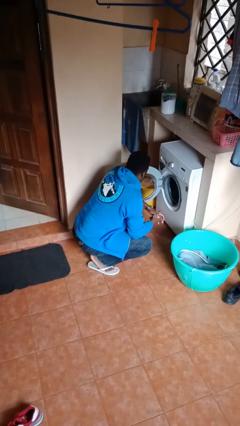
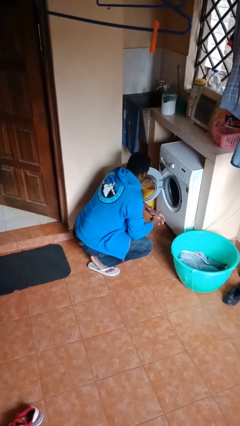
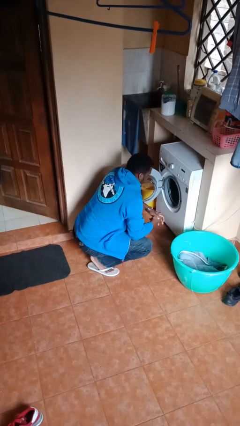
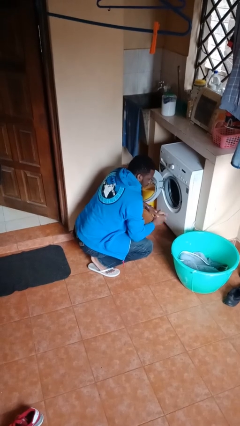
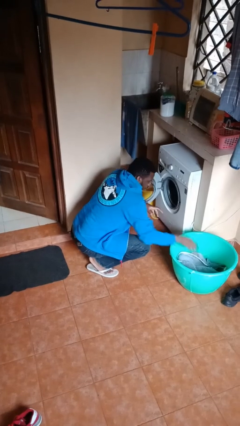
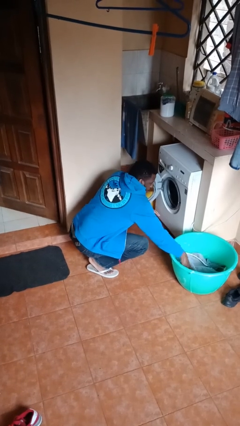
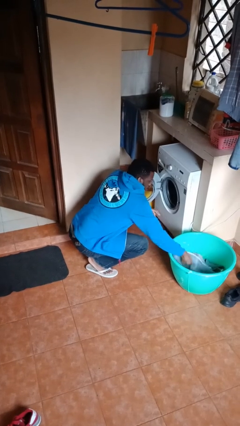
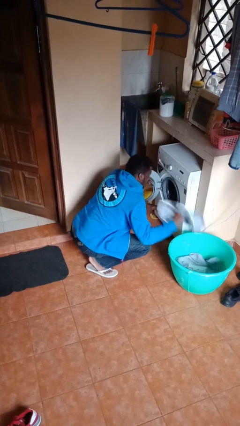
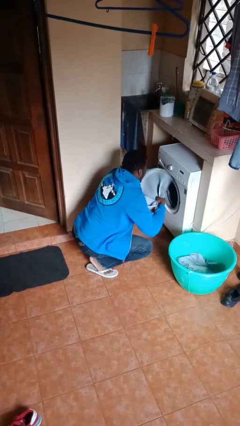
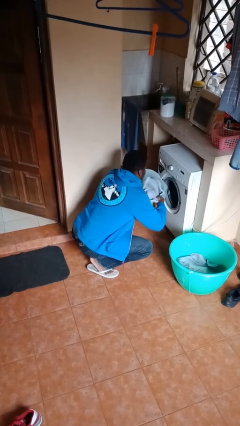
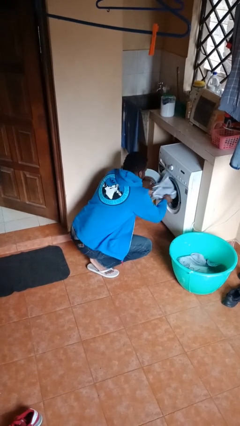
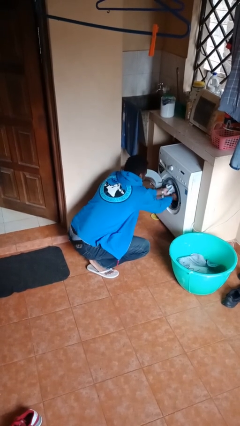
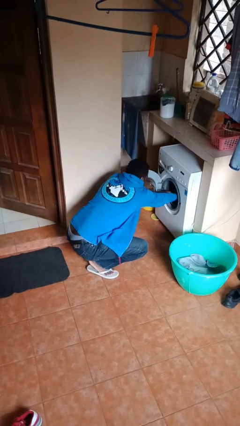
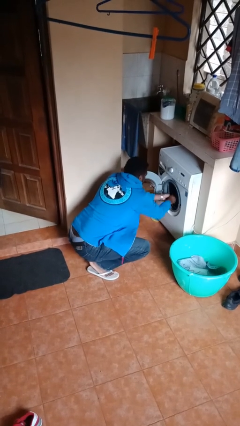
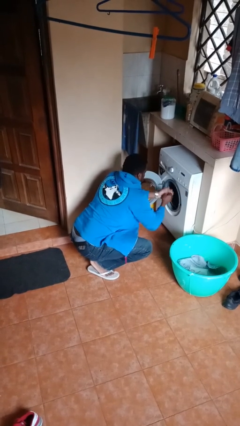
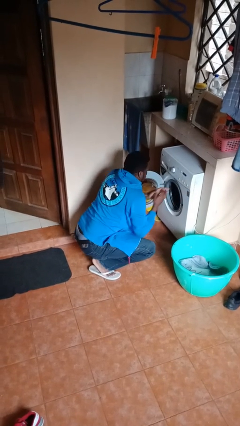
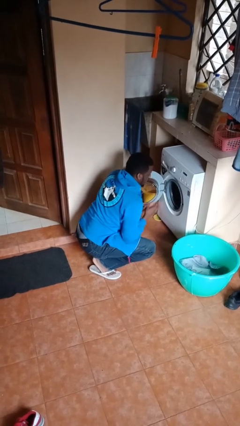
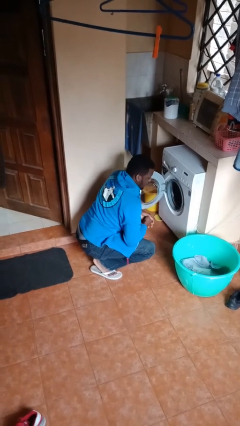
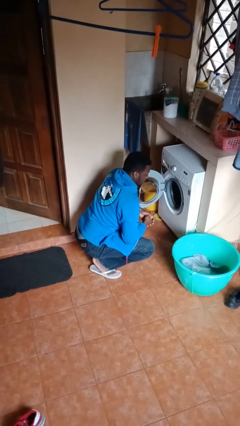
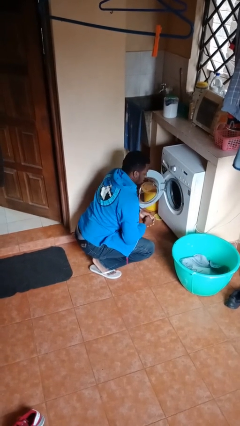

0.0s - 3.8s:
person loads clotheswasher

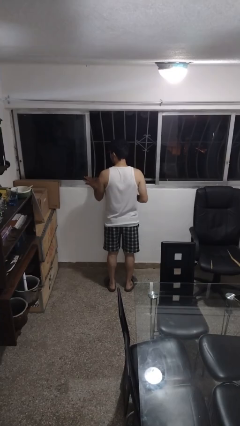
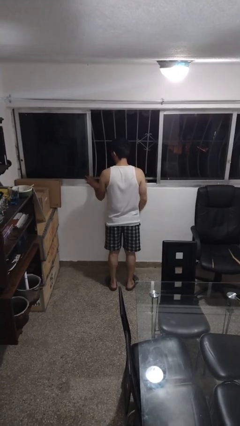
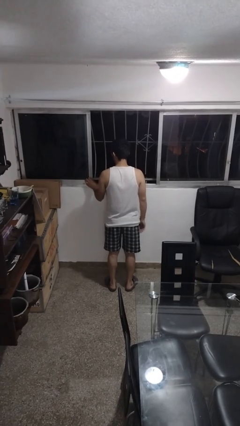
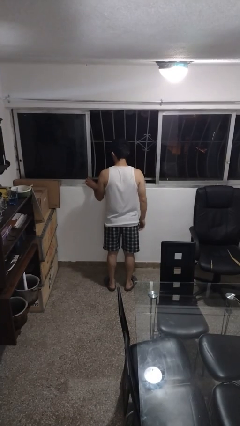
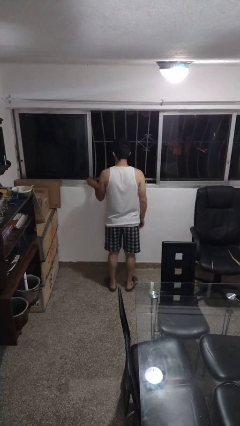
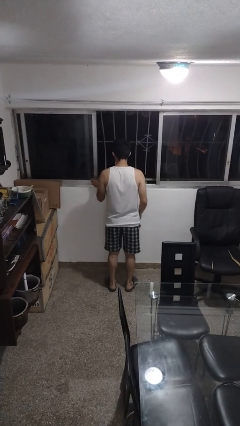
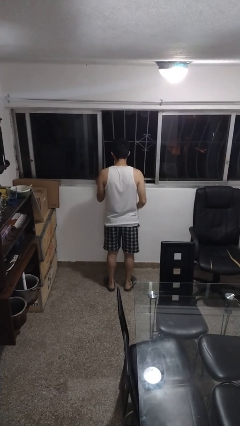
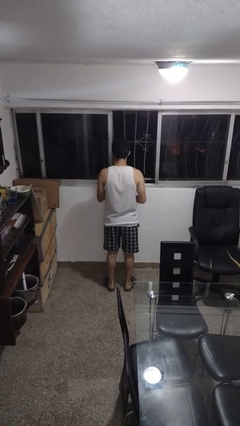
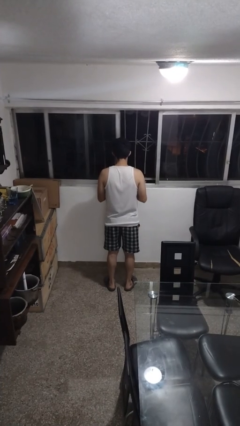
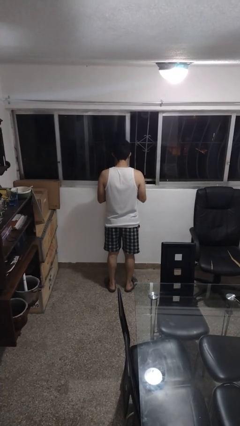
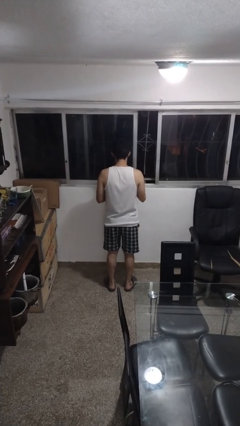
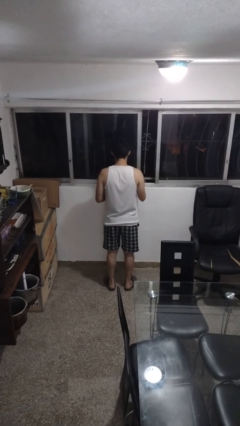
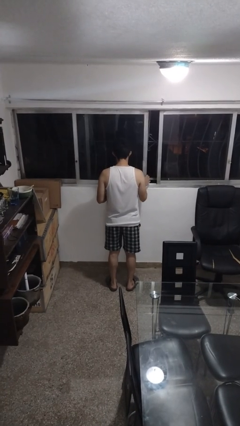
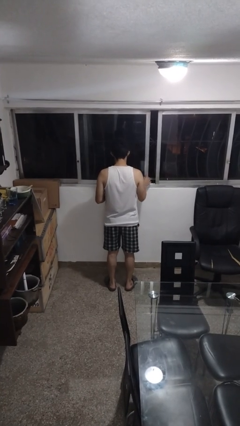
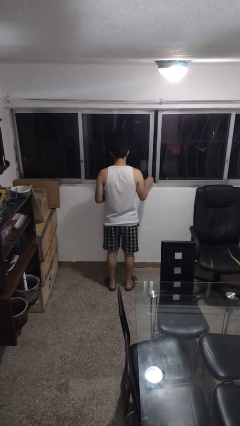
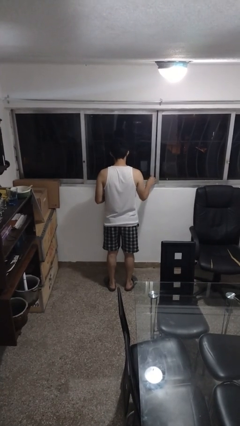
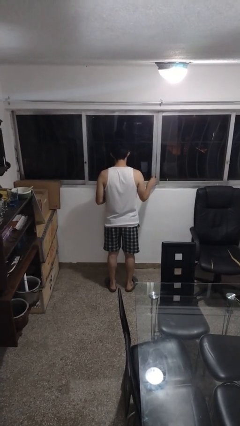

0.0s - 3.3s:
person closes home window

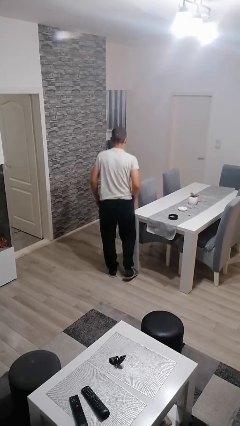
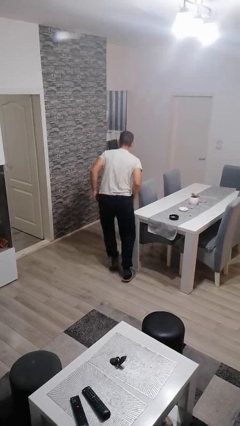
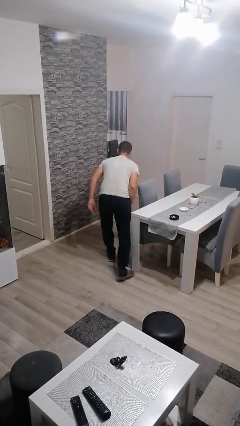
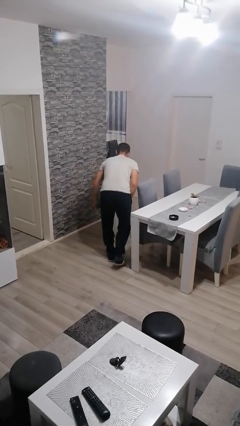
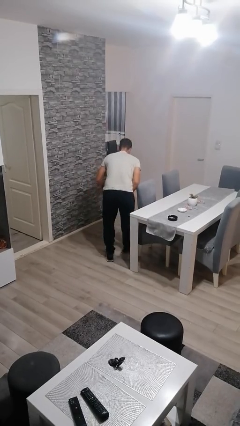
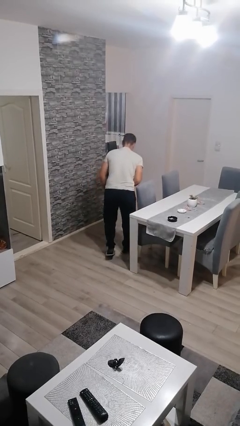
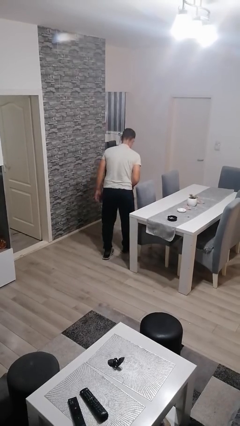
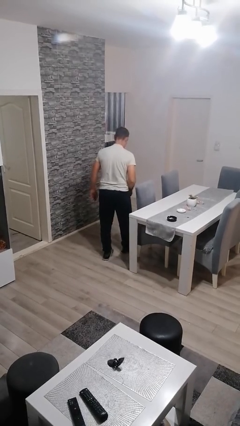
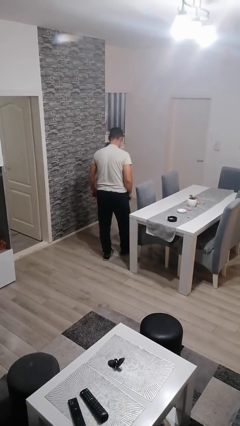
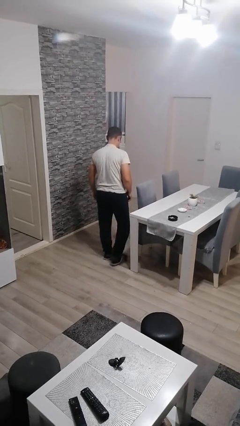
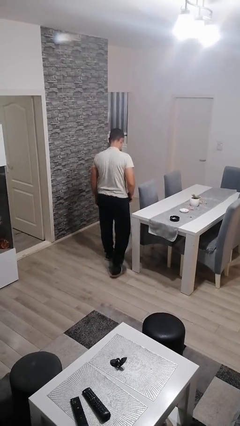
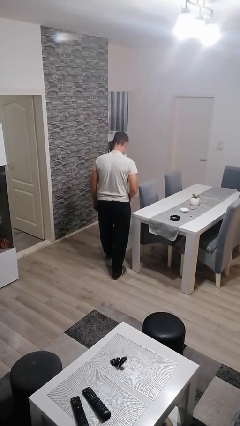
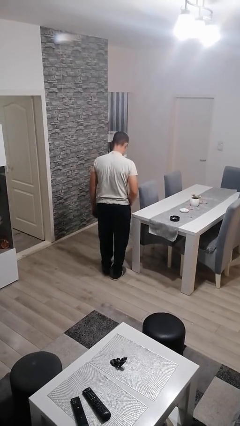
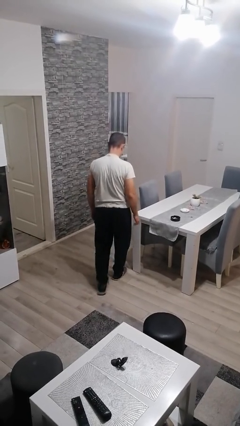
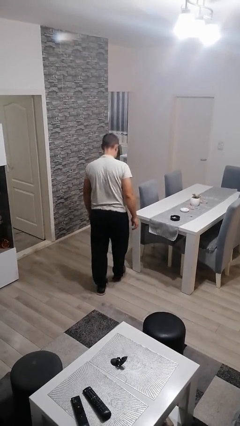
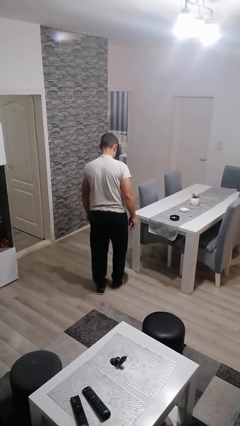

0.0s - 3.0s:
person bumps into table

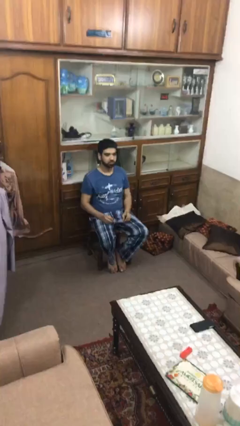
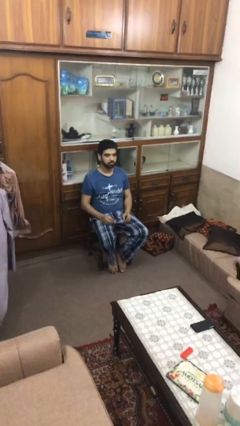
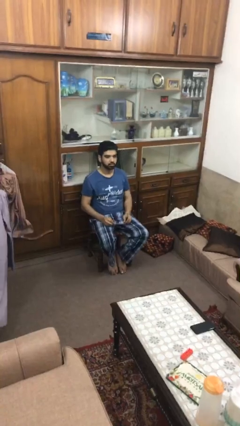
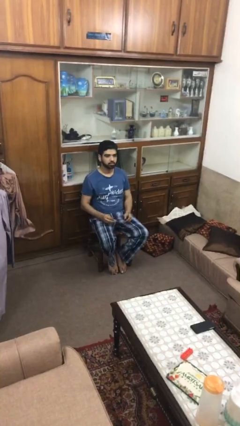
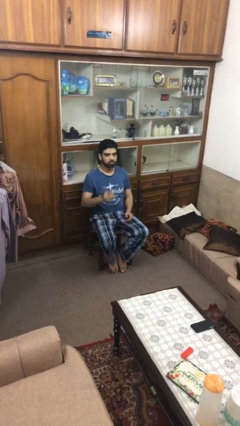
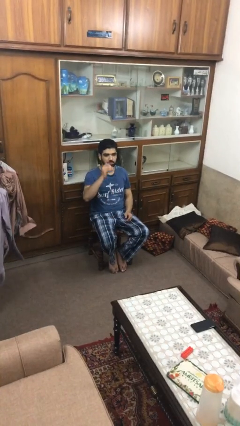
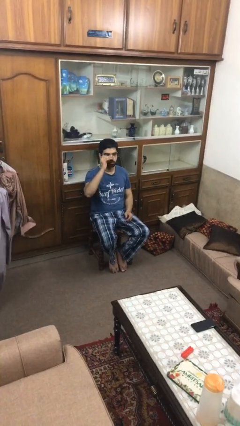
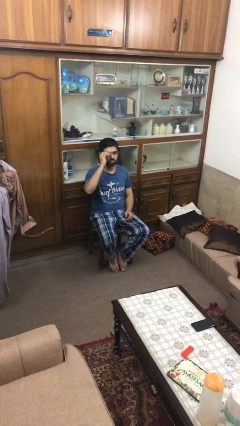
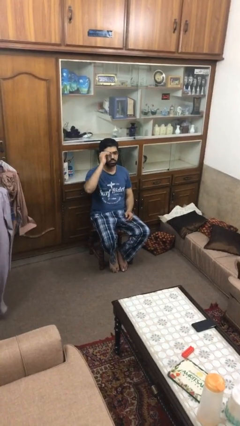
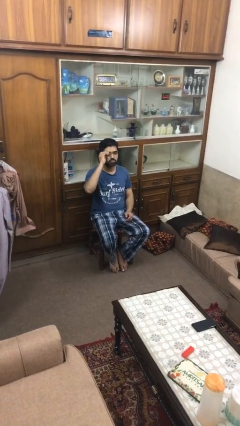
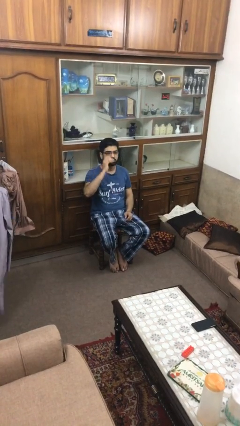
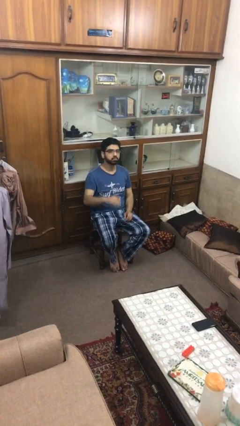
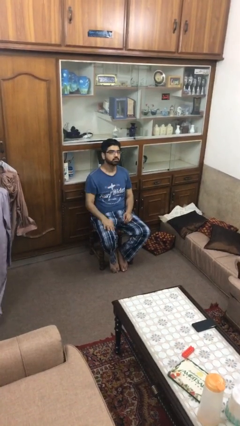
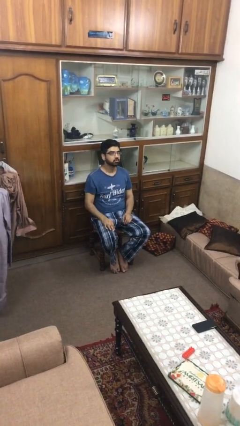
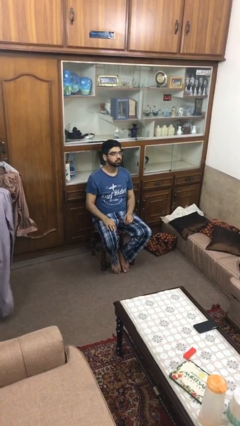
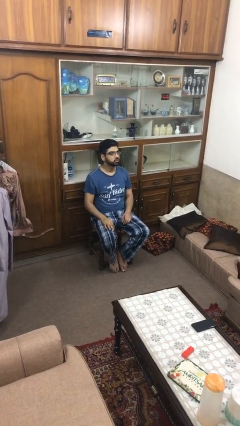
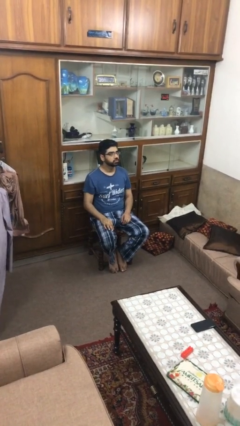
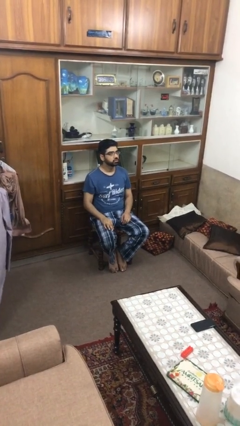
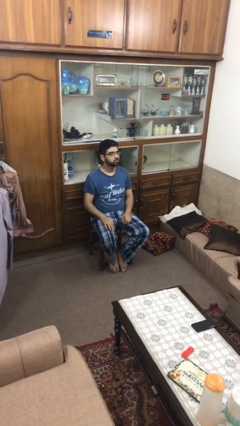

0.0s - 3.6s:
person puts on glasses

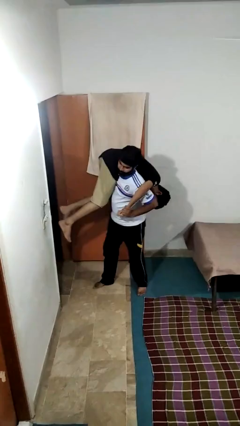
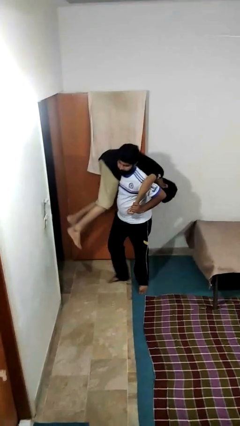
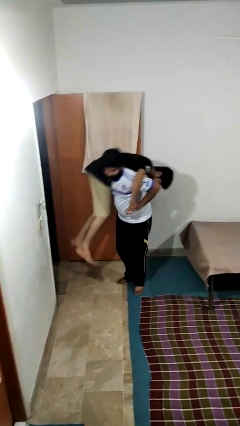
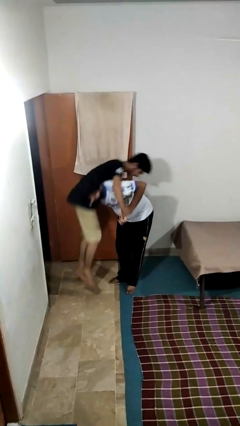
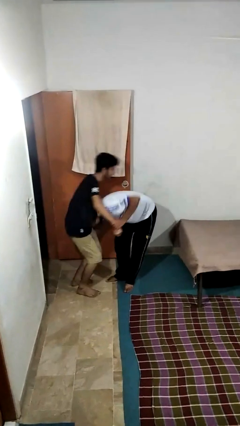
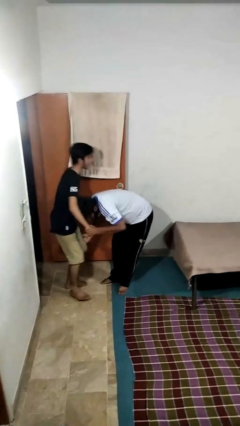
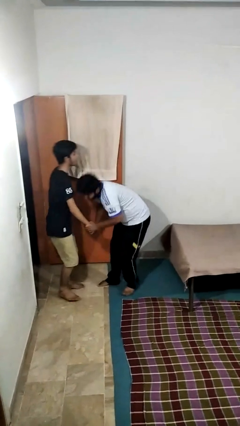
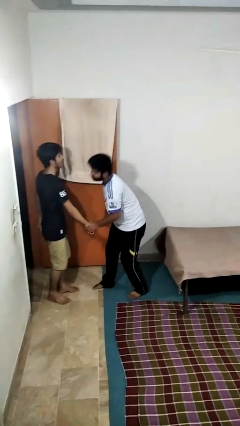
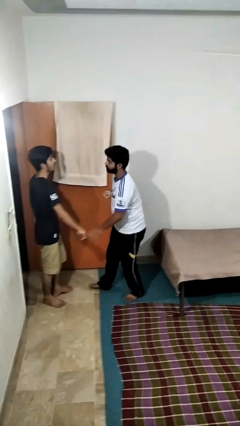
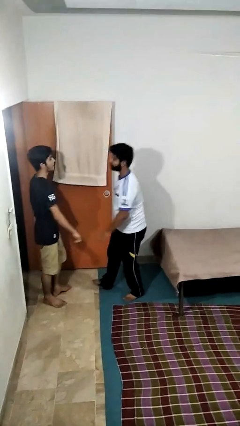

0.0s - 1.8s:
person puts down person

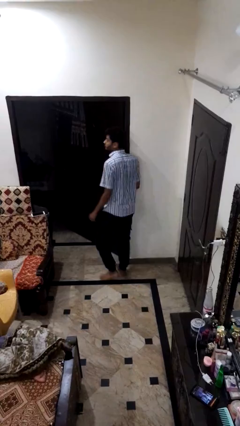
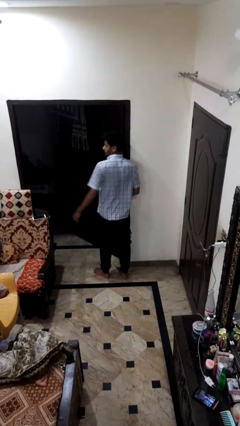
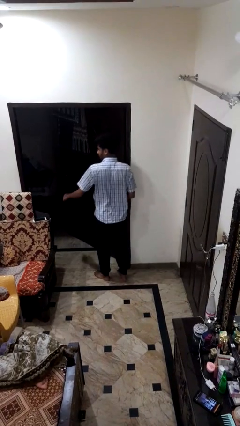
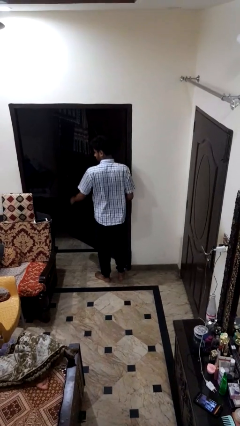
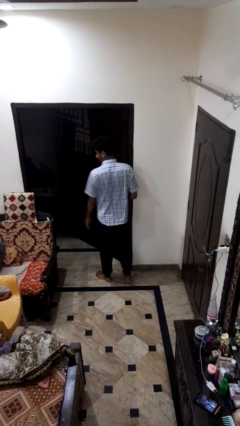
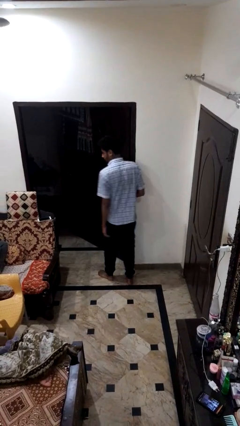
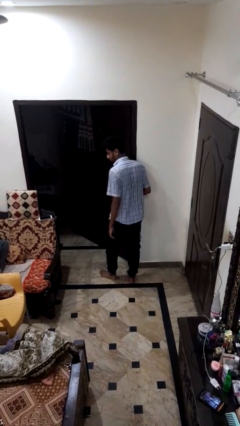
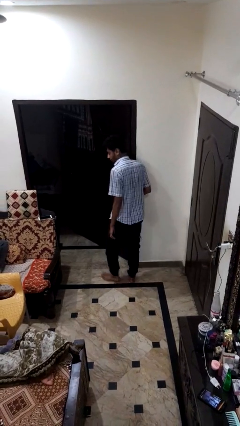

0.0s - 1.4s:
person bumps into wall

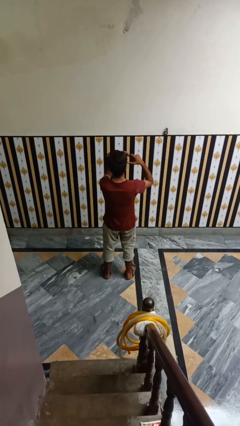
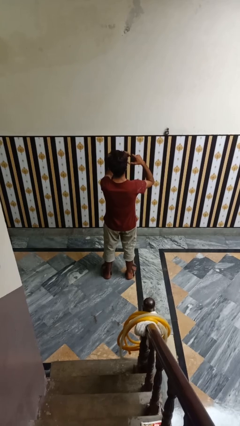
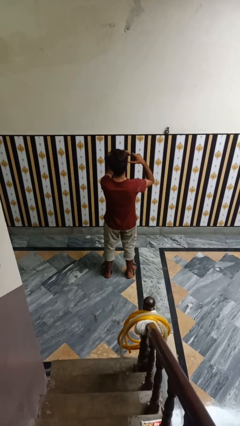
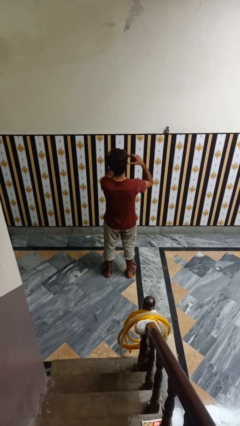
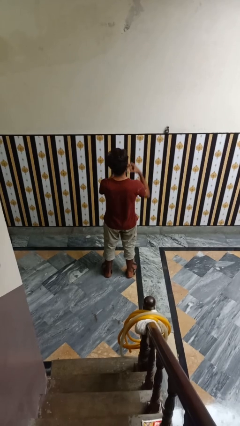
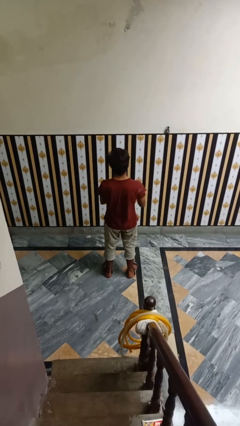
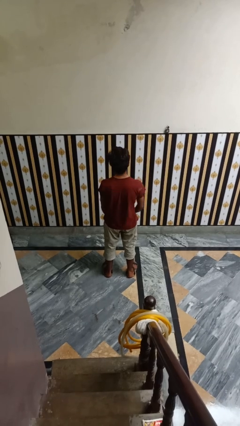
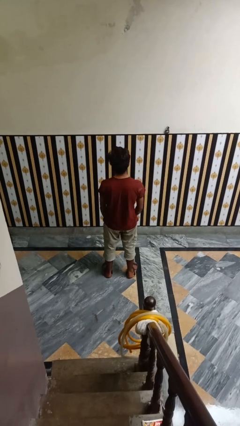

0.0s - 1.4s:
person gestures heart
